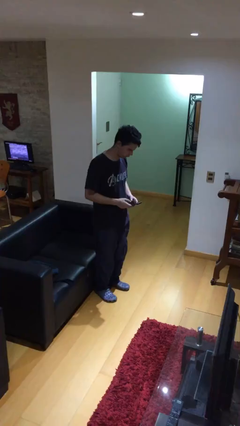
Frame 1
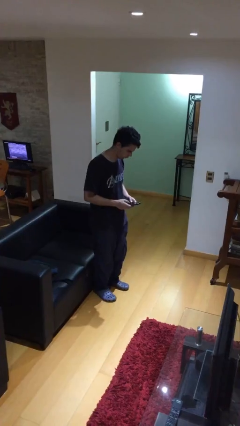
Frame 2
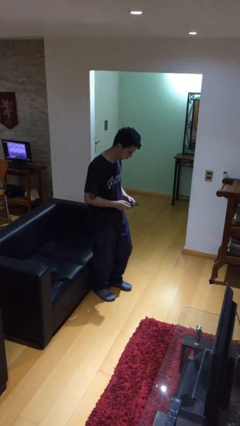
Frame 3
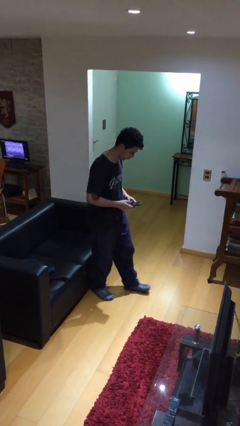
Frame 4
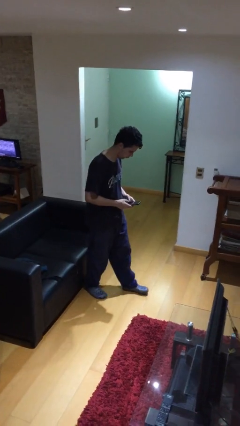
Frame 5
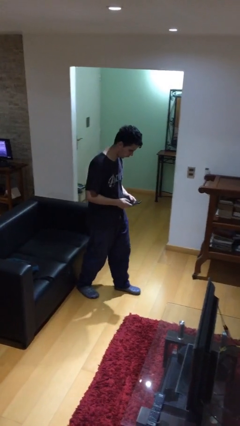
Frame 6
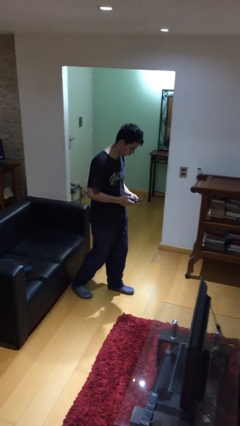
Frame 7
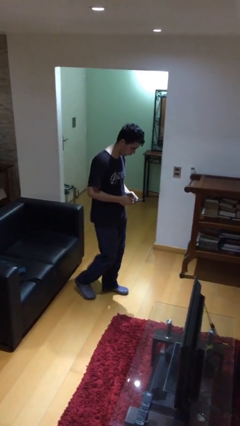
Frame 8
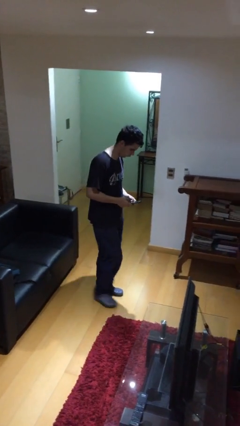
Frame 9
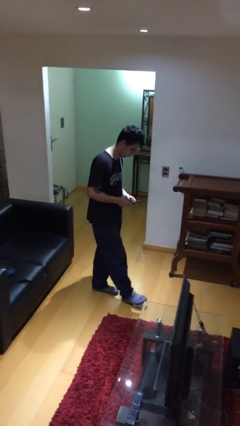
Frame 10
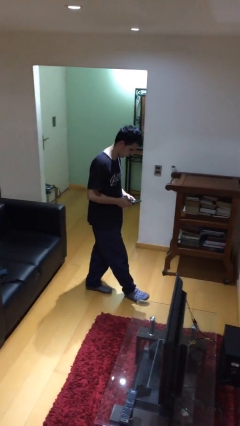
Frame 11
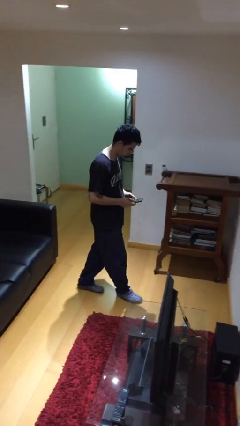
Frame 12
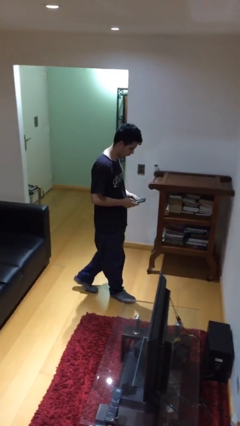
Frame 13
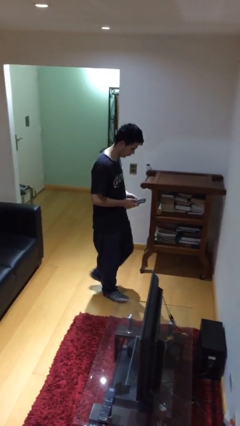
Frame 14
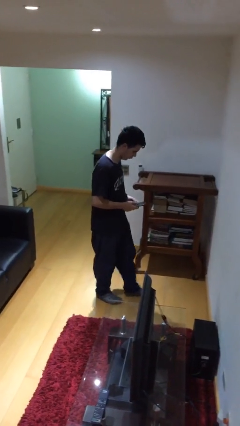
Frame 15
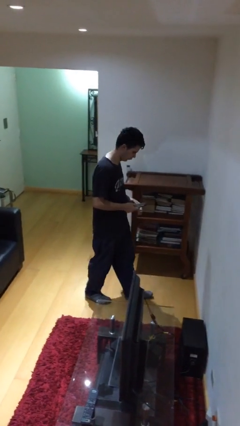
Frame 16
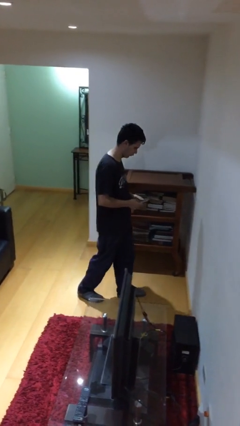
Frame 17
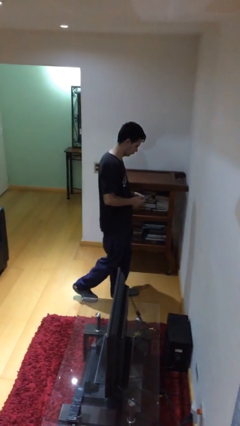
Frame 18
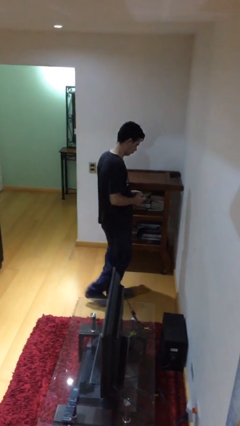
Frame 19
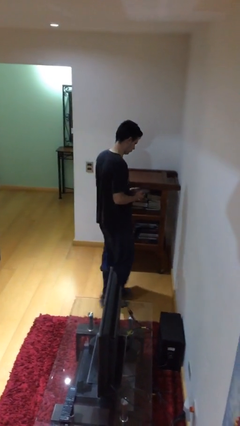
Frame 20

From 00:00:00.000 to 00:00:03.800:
person texts on phone

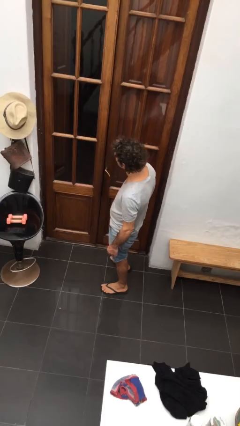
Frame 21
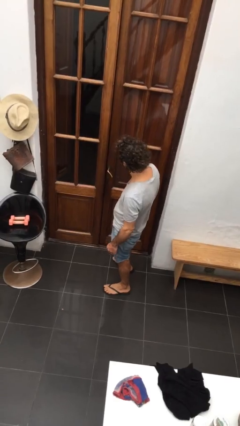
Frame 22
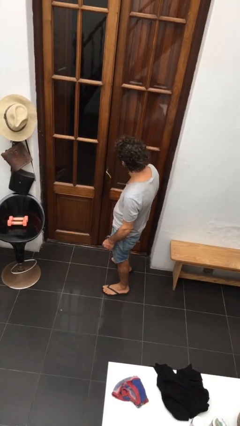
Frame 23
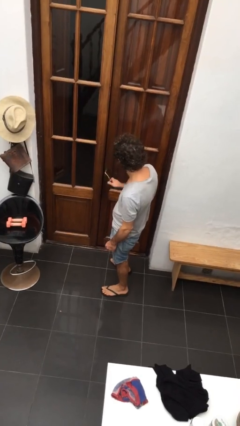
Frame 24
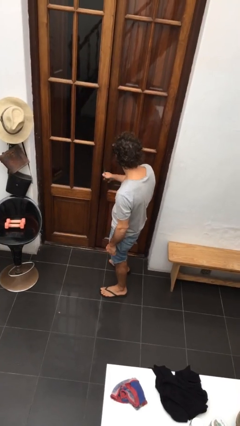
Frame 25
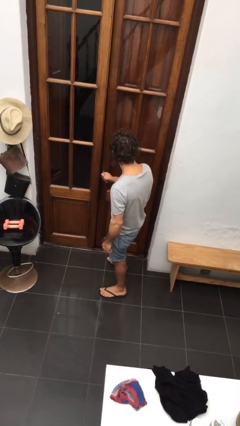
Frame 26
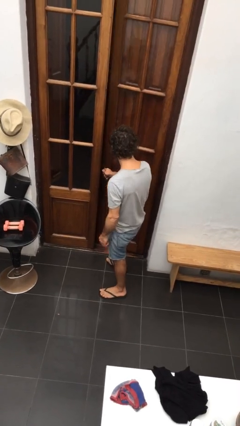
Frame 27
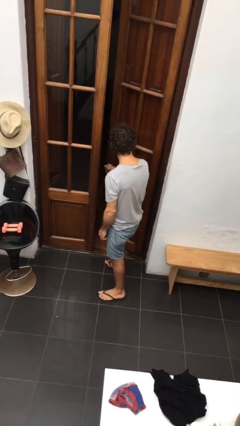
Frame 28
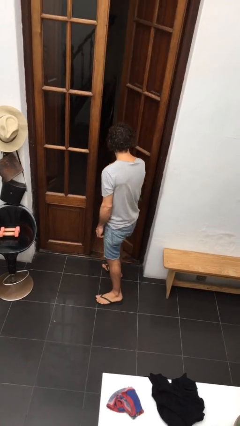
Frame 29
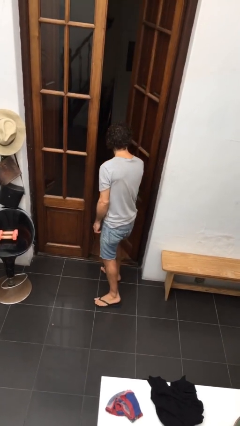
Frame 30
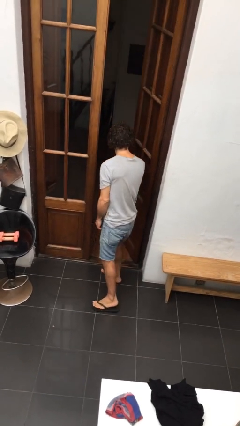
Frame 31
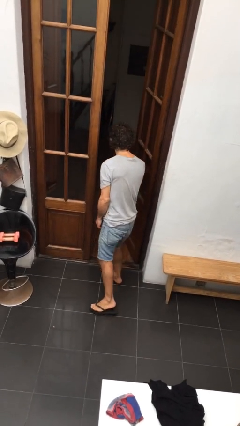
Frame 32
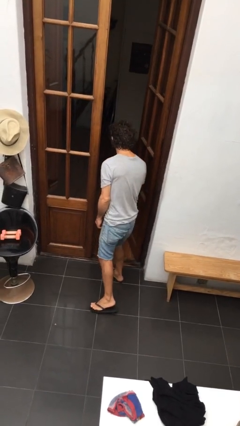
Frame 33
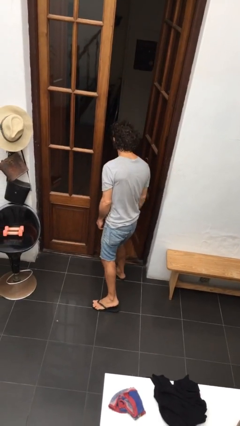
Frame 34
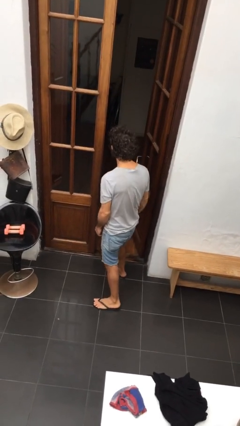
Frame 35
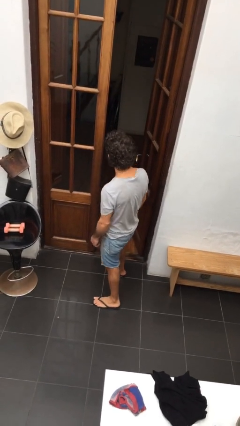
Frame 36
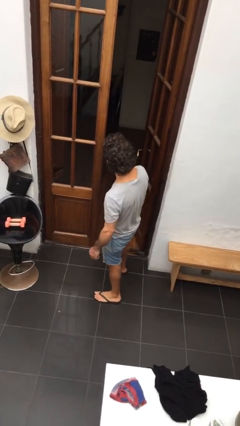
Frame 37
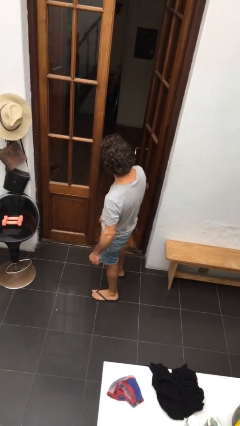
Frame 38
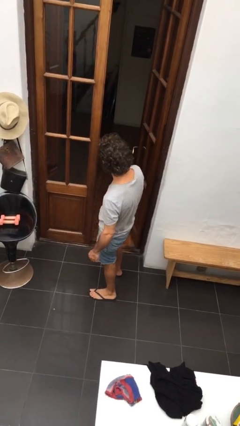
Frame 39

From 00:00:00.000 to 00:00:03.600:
person opens facility door

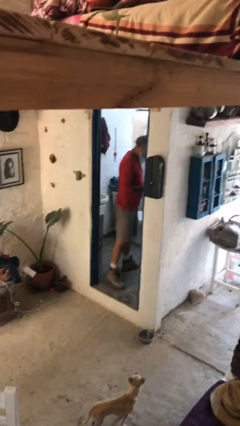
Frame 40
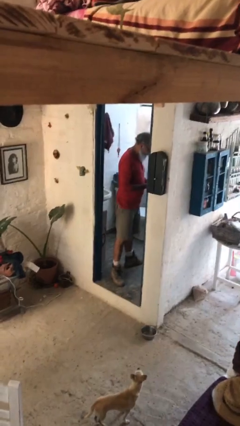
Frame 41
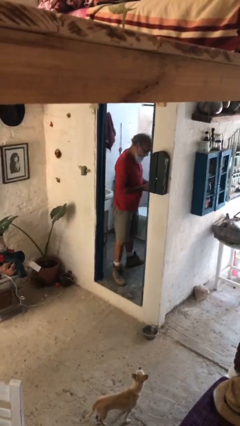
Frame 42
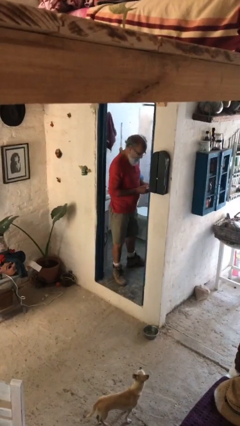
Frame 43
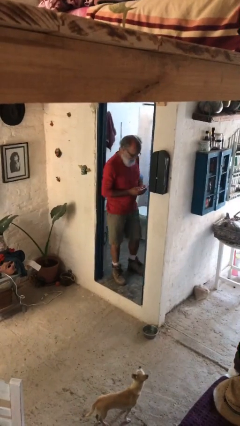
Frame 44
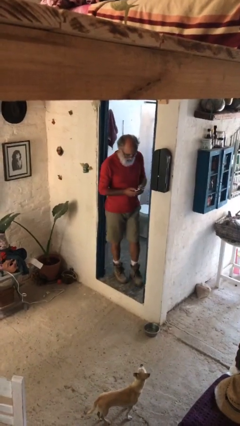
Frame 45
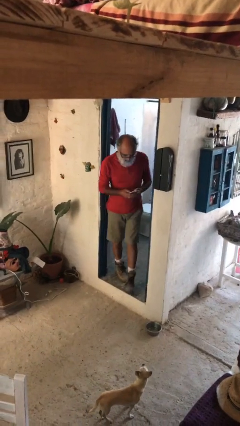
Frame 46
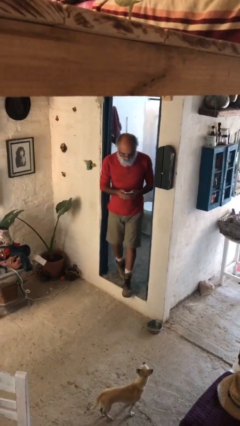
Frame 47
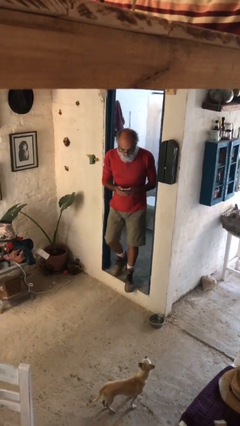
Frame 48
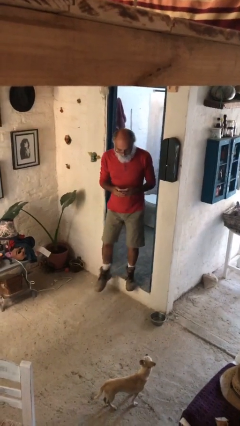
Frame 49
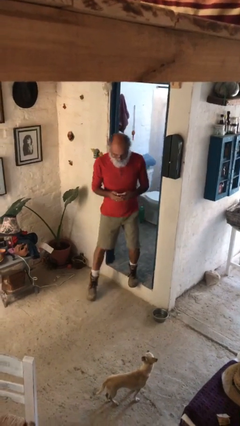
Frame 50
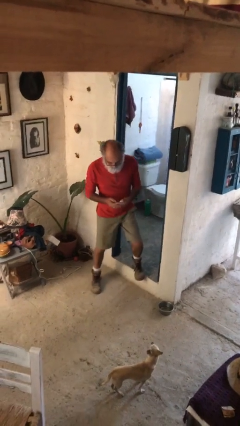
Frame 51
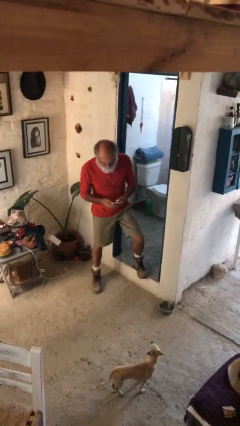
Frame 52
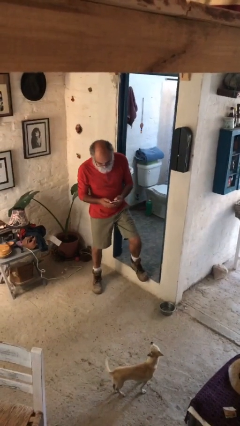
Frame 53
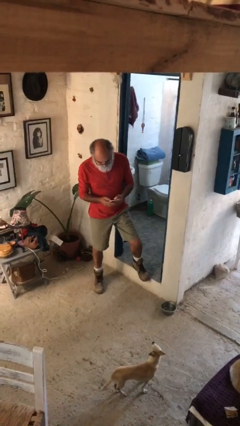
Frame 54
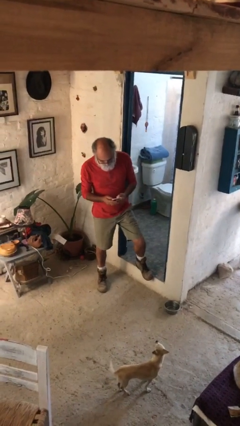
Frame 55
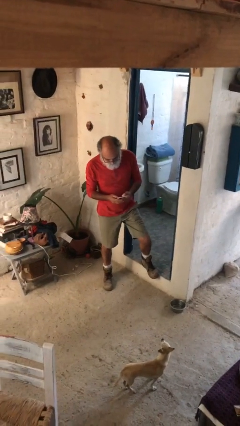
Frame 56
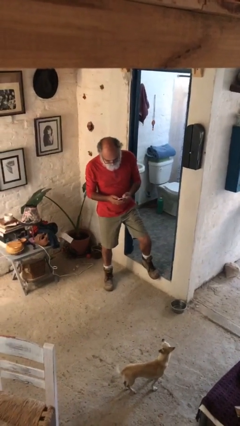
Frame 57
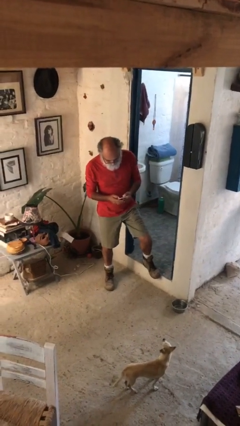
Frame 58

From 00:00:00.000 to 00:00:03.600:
person enters scene through structure

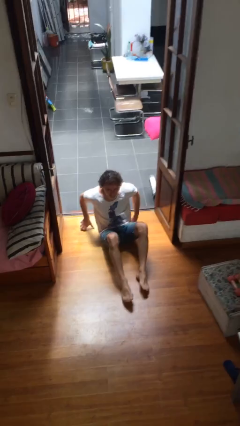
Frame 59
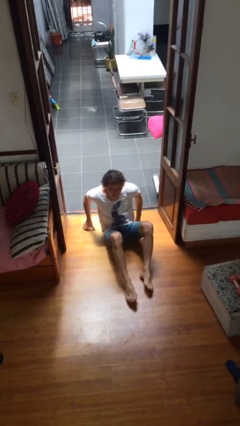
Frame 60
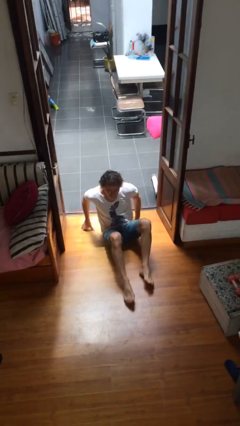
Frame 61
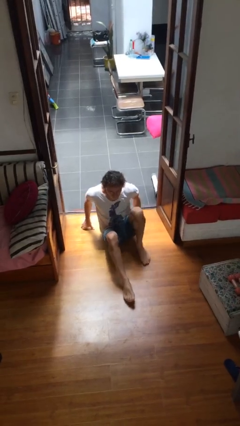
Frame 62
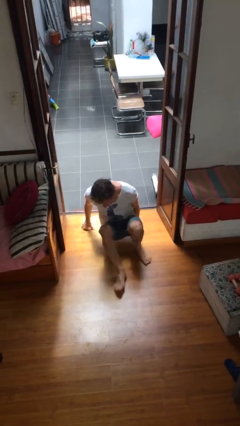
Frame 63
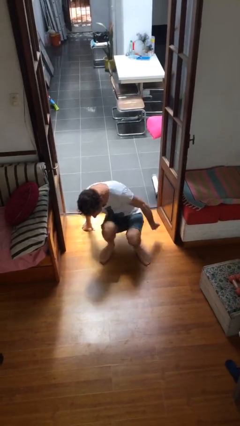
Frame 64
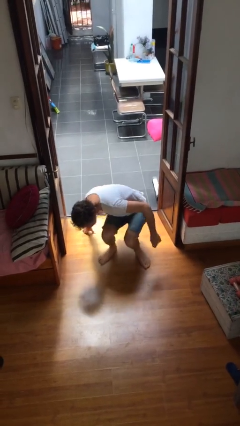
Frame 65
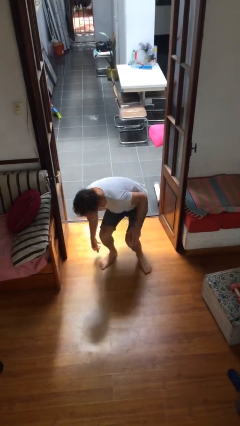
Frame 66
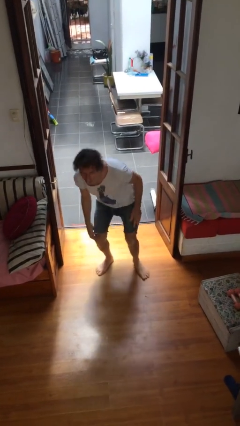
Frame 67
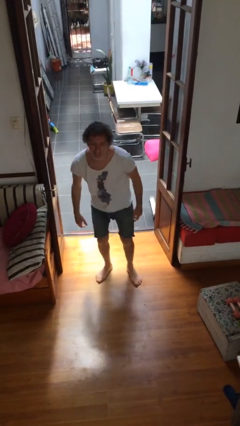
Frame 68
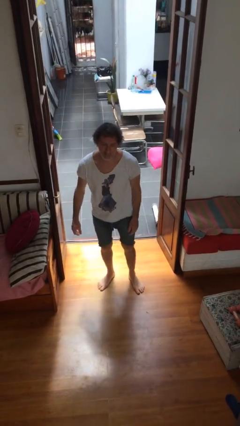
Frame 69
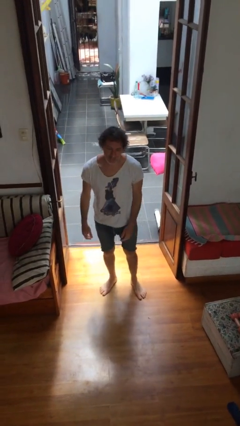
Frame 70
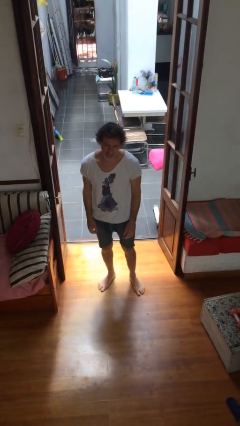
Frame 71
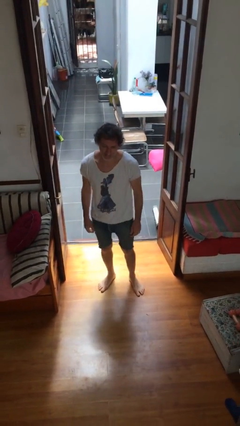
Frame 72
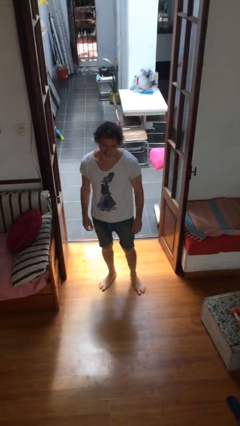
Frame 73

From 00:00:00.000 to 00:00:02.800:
person stands up

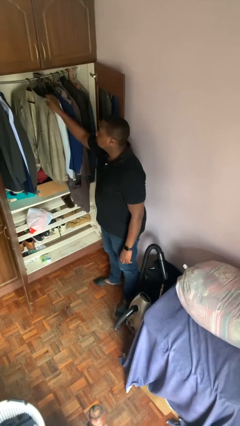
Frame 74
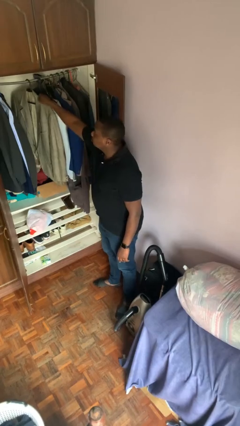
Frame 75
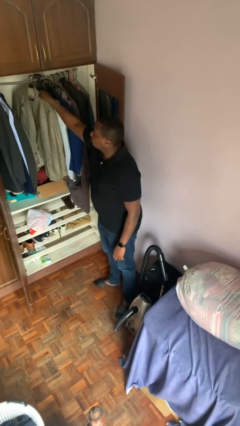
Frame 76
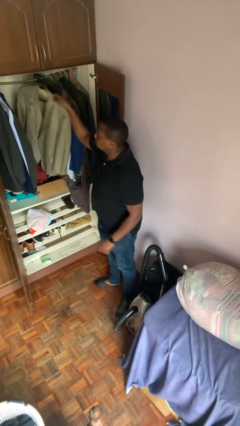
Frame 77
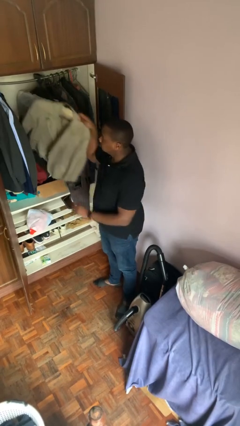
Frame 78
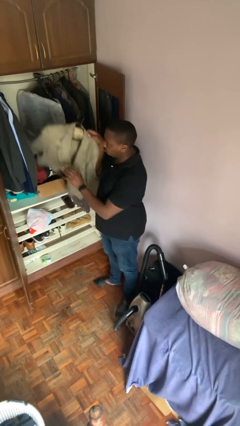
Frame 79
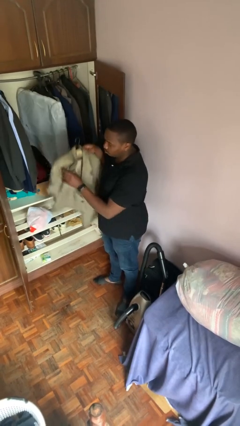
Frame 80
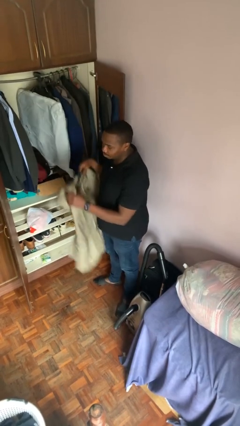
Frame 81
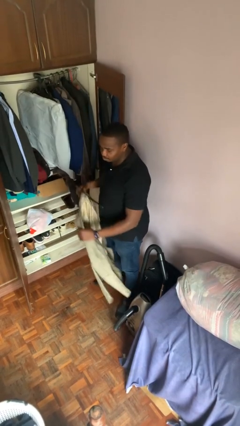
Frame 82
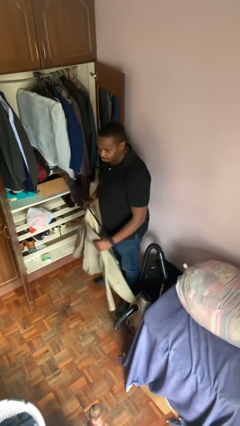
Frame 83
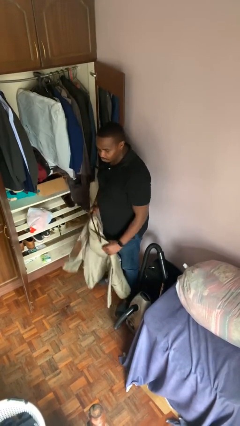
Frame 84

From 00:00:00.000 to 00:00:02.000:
person takes clothes from closet

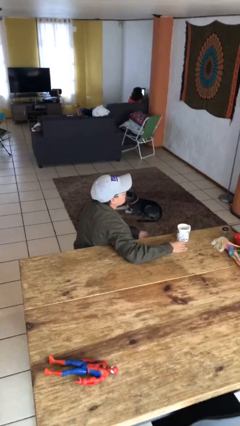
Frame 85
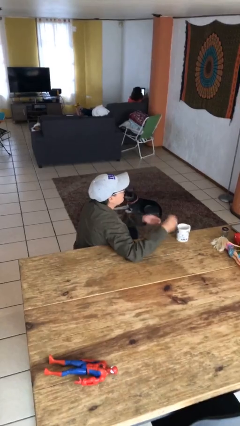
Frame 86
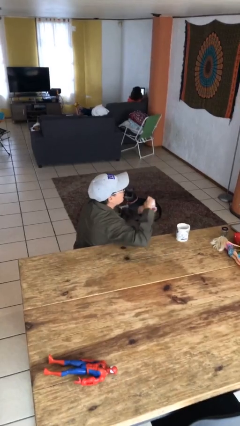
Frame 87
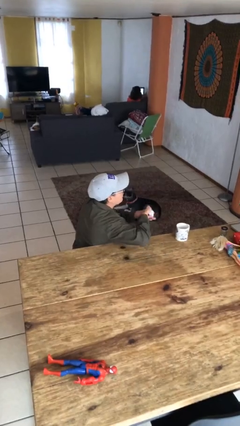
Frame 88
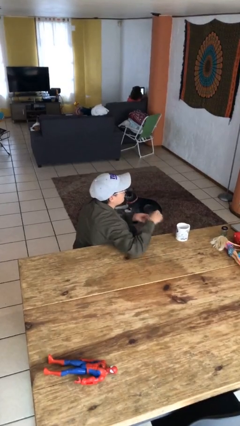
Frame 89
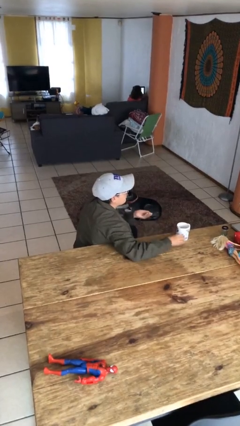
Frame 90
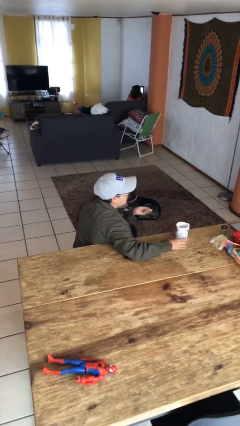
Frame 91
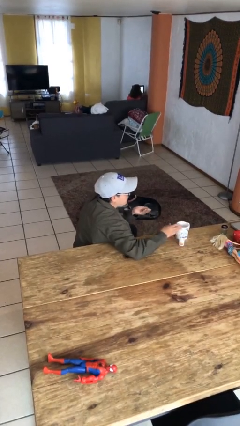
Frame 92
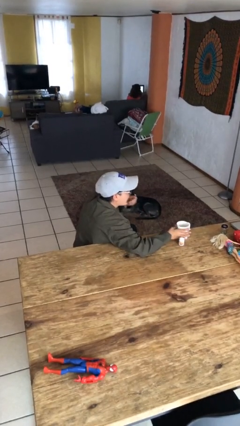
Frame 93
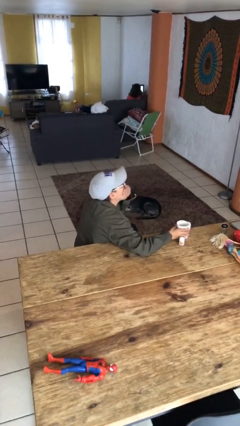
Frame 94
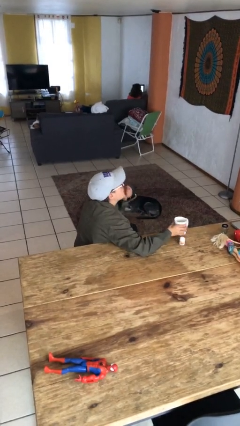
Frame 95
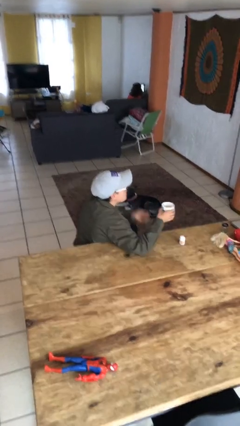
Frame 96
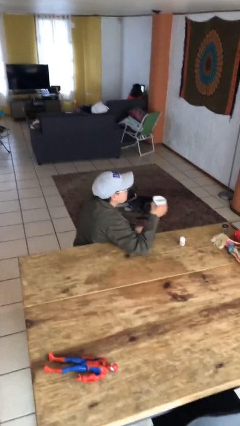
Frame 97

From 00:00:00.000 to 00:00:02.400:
person takes medicine pills
